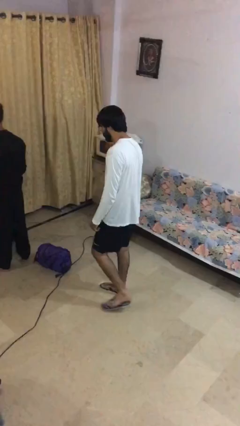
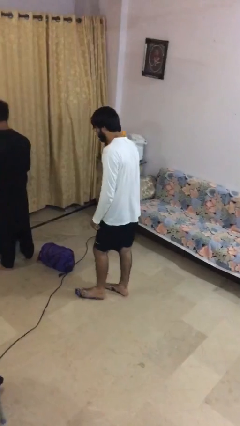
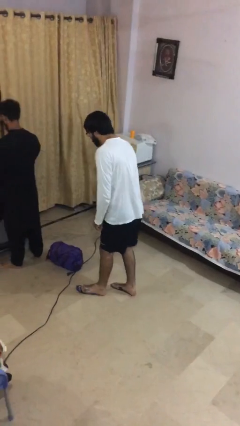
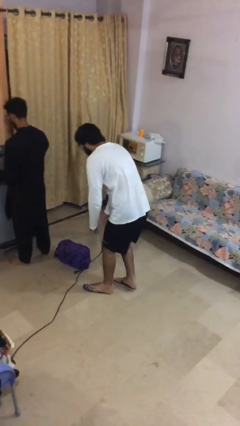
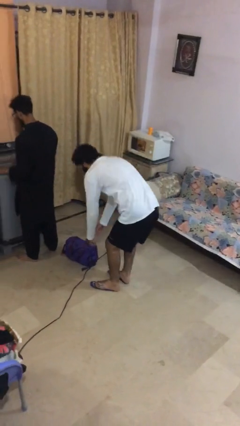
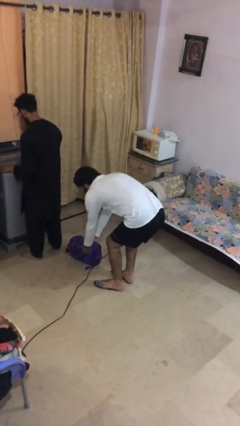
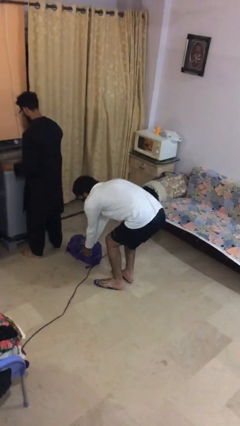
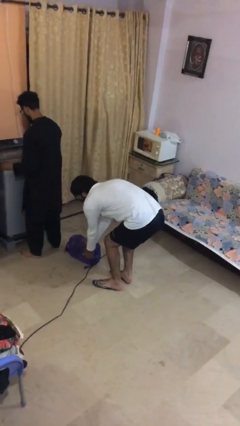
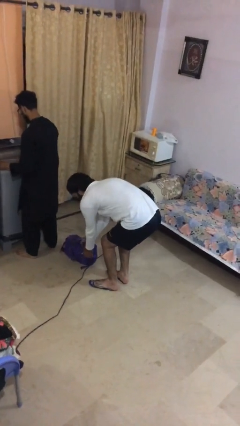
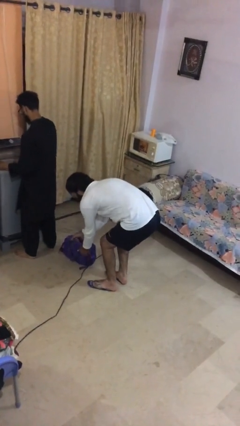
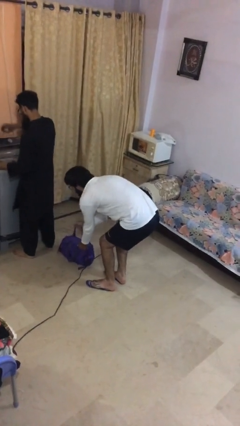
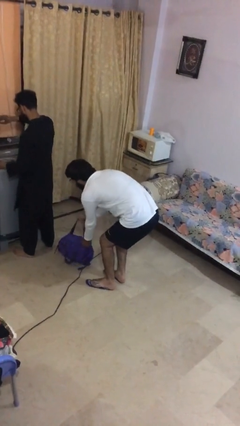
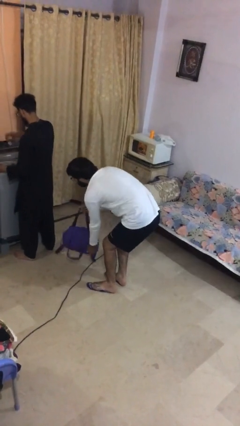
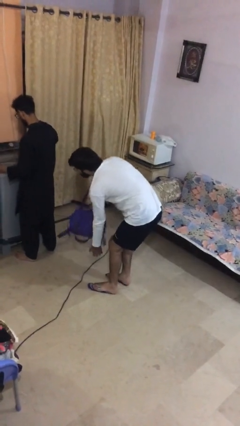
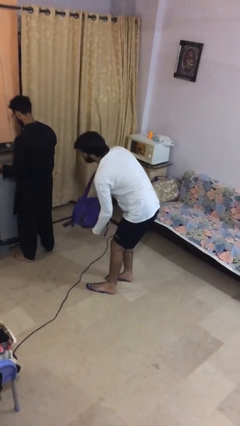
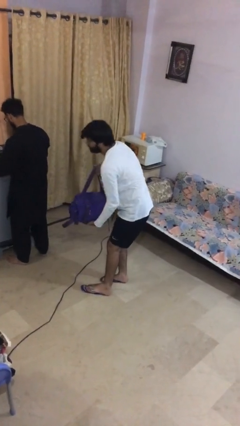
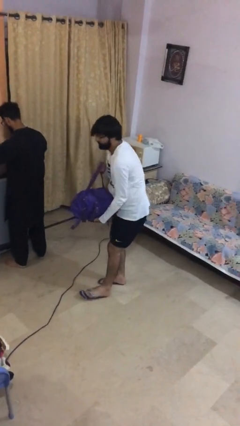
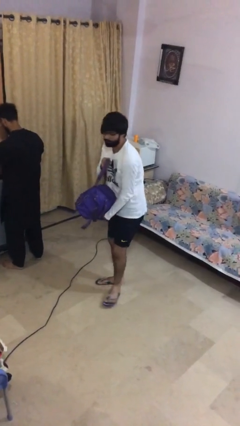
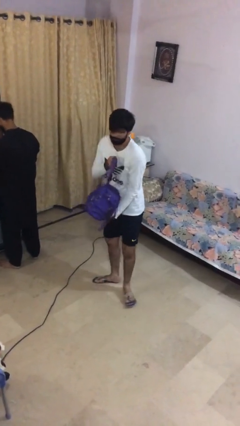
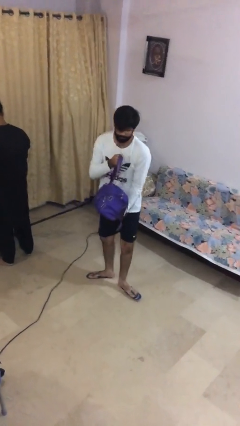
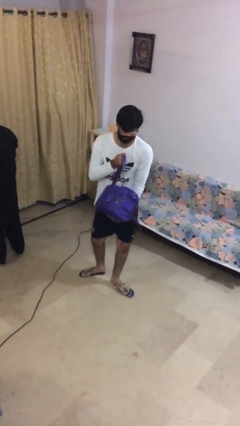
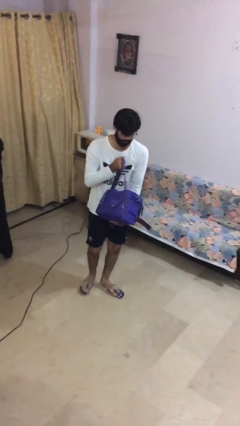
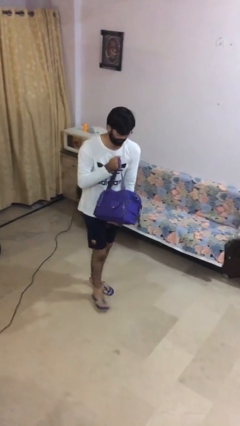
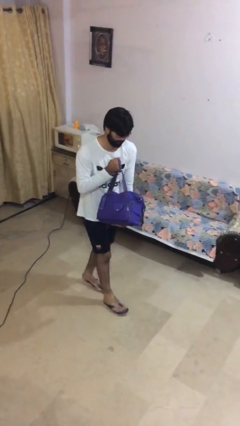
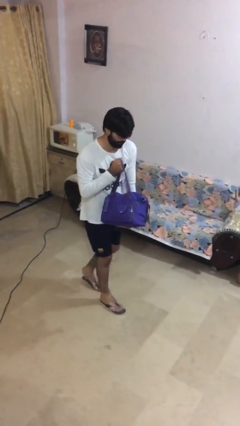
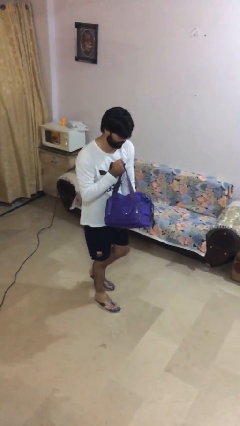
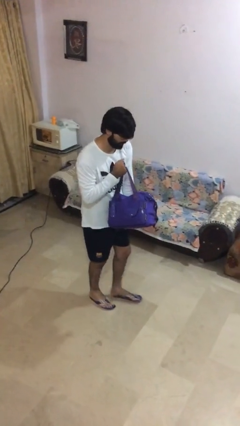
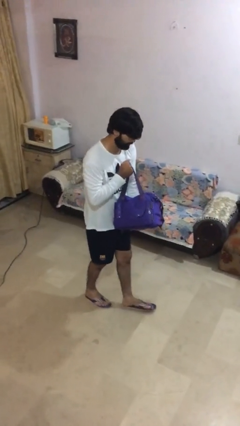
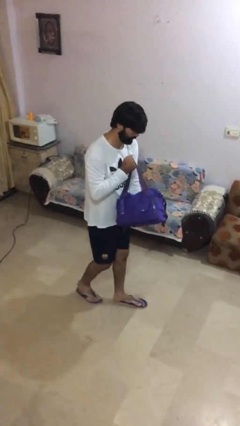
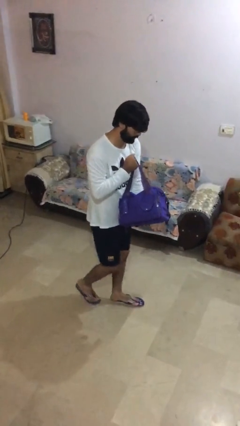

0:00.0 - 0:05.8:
person steals object from person

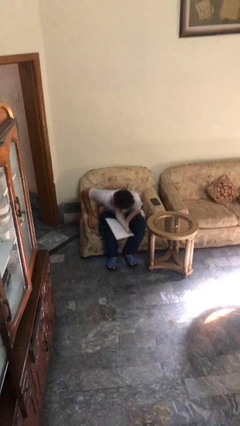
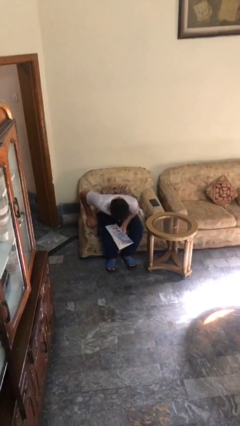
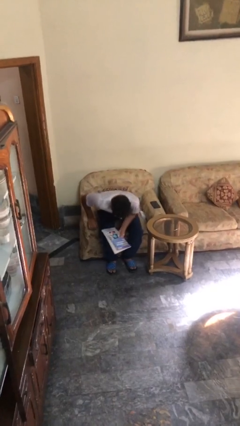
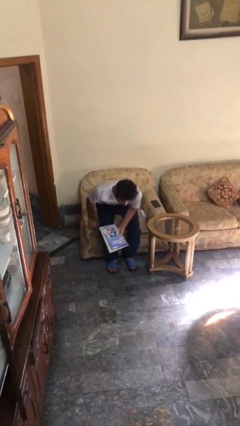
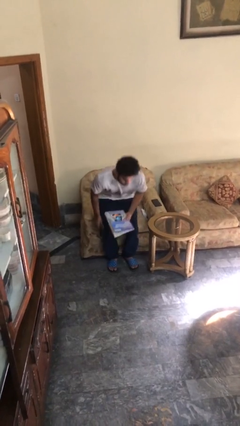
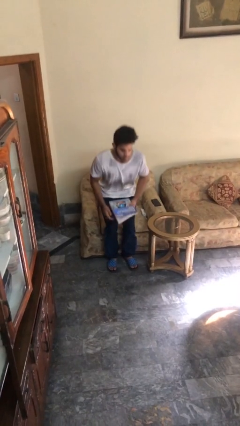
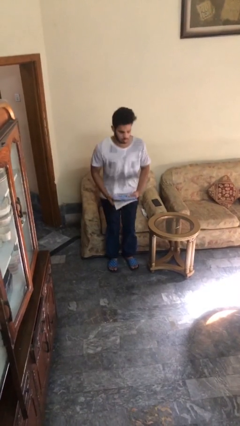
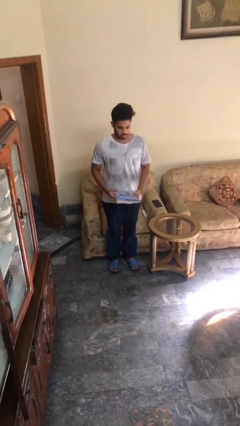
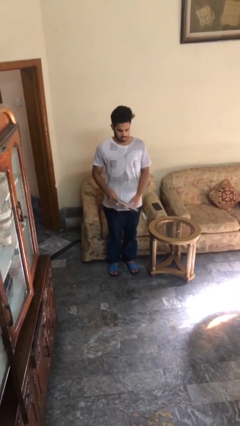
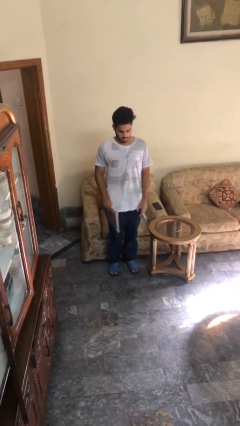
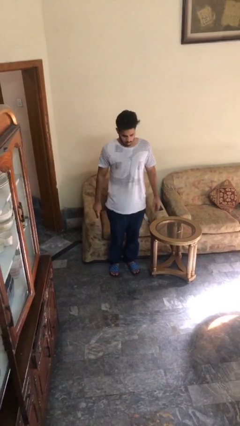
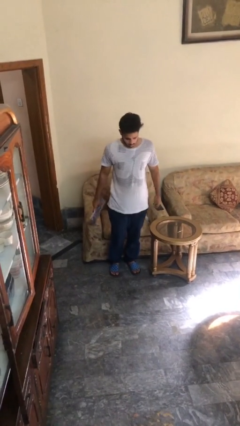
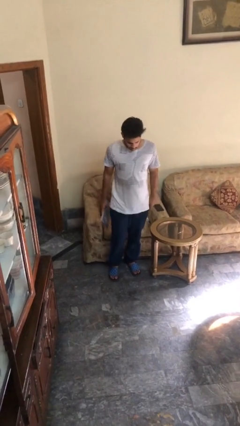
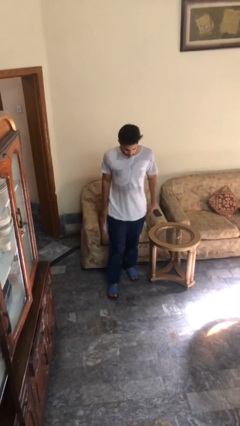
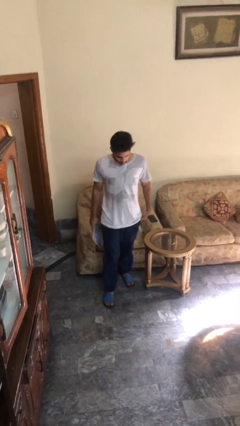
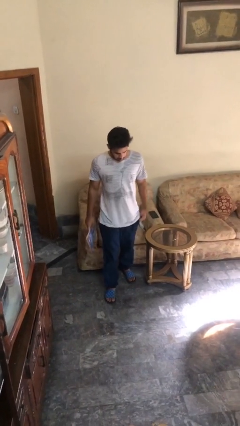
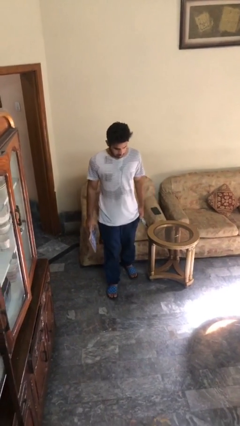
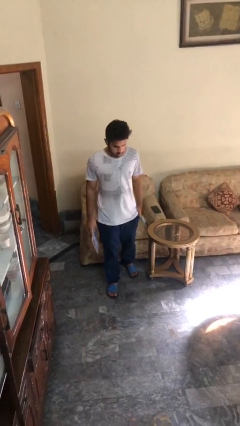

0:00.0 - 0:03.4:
person stands up

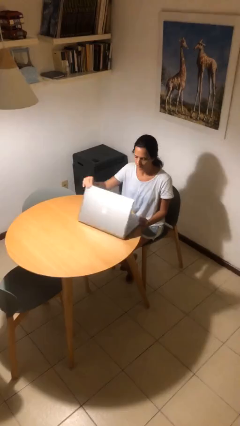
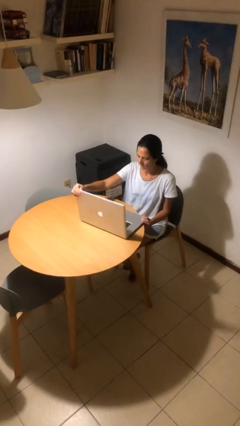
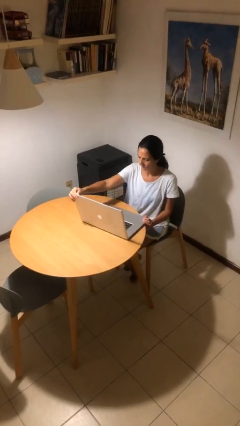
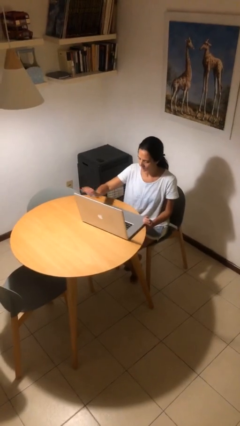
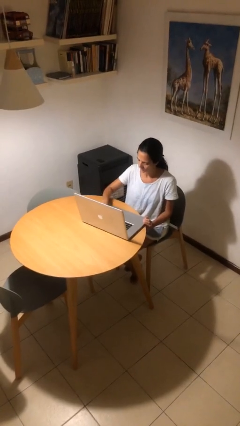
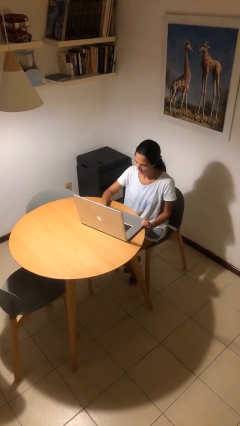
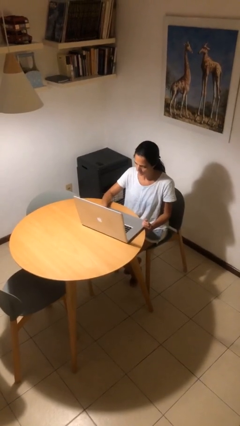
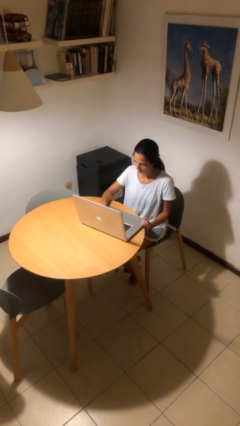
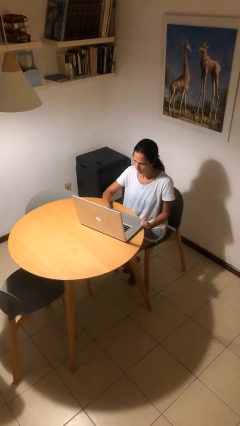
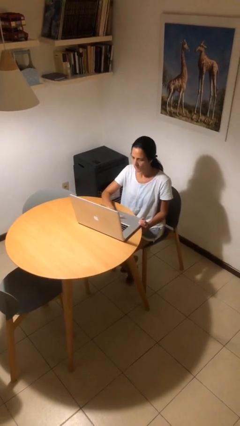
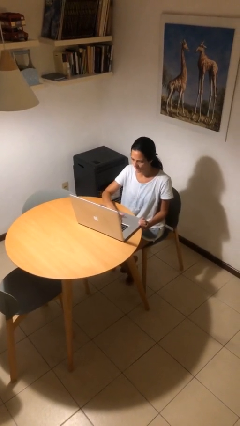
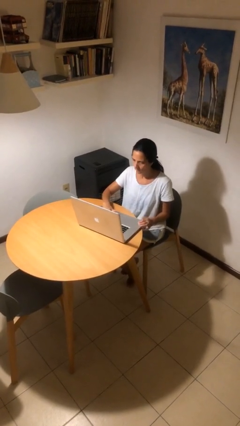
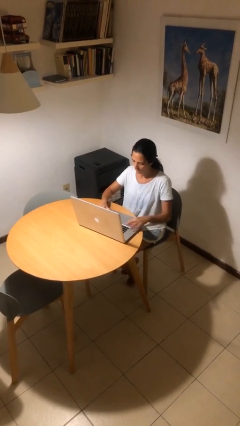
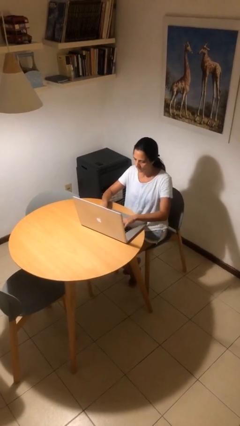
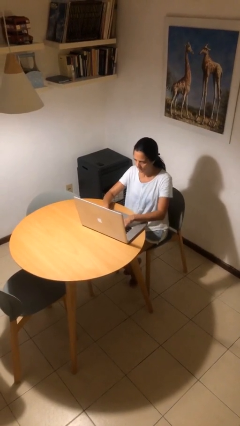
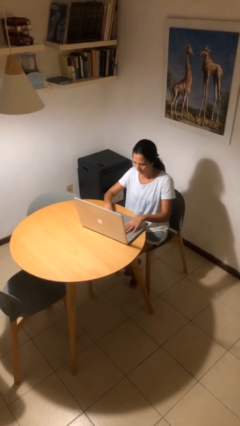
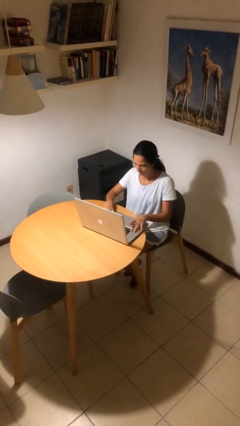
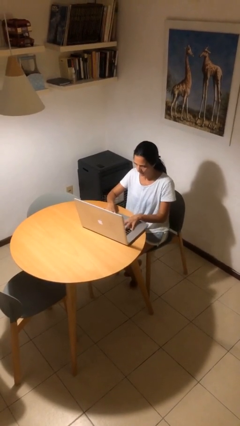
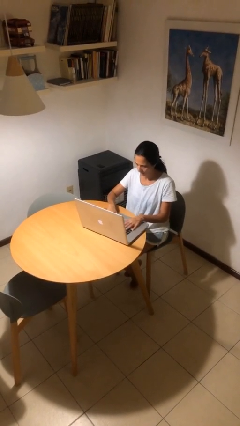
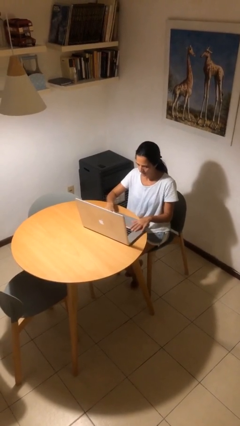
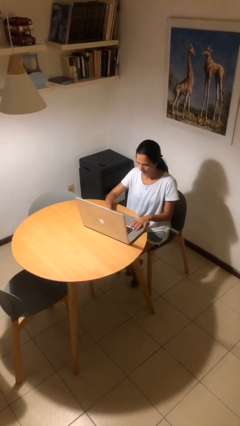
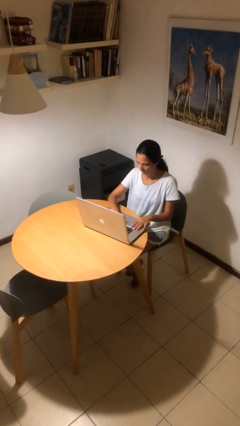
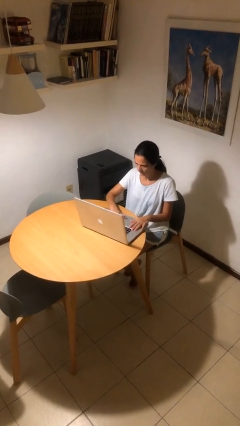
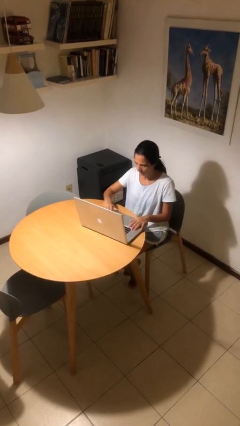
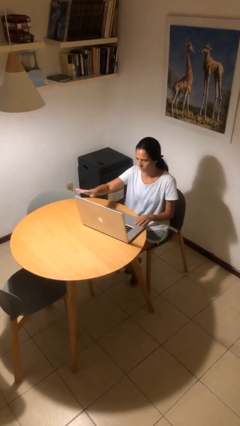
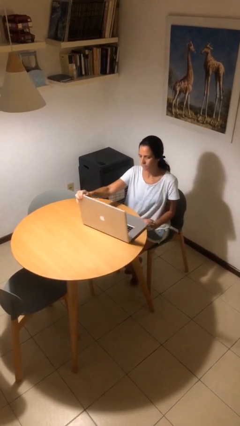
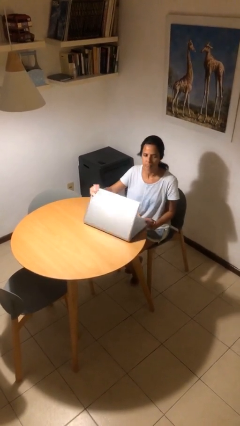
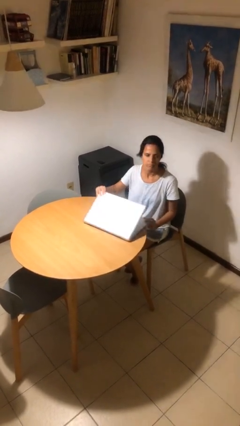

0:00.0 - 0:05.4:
person interacts with laptop

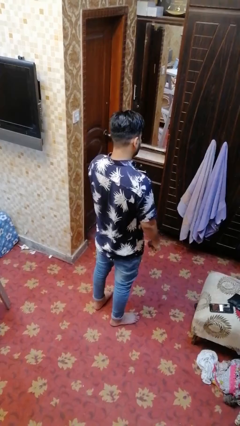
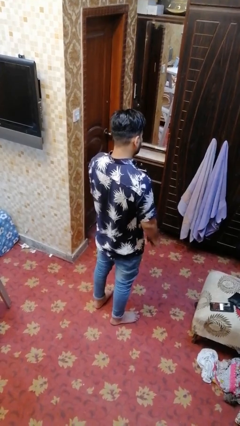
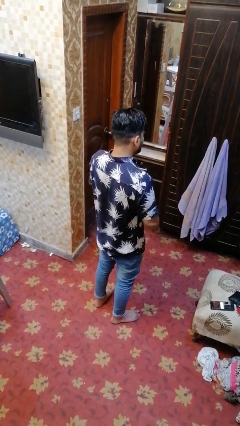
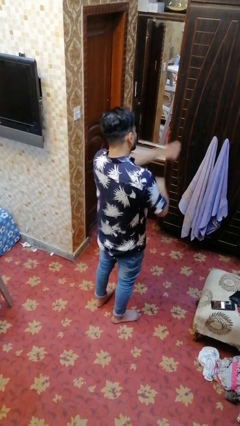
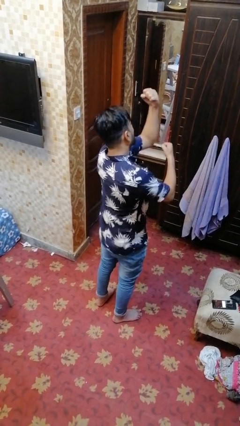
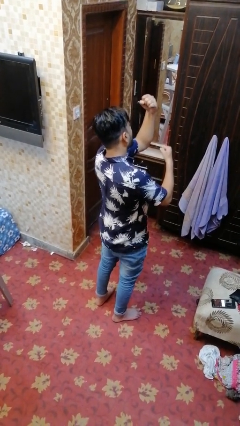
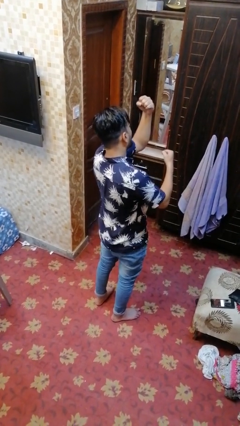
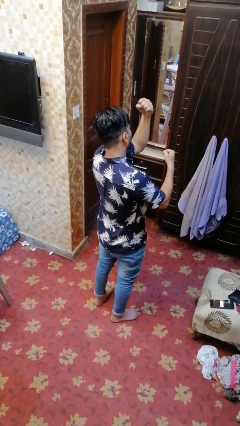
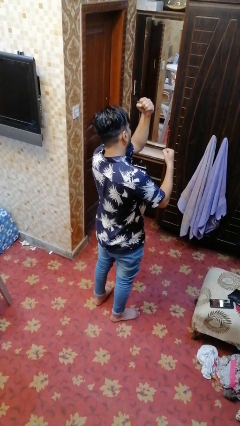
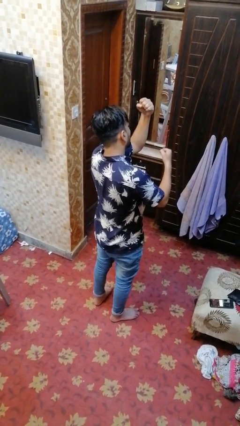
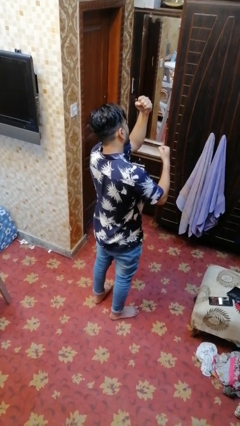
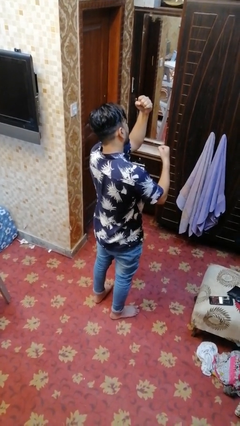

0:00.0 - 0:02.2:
person punches

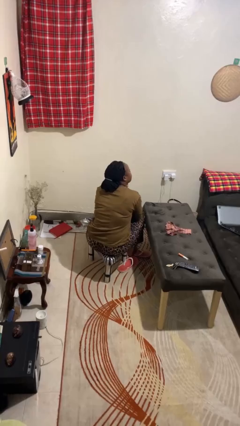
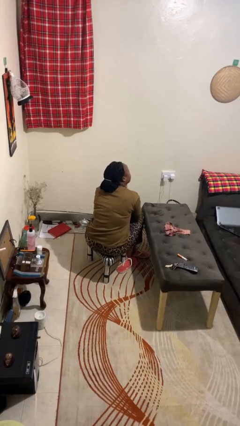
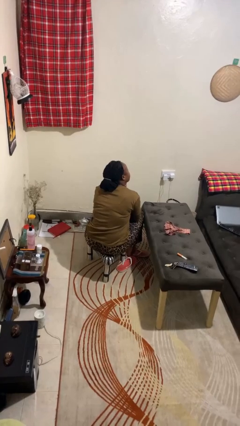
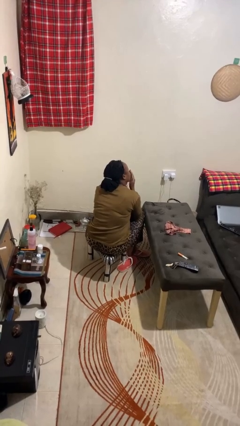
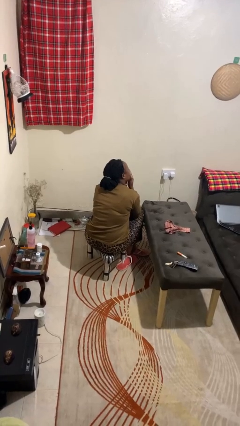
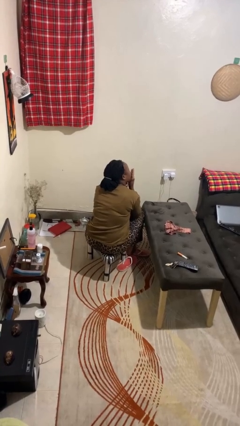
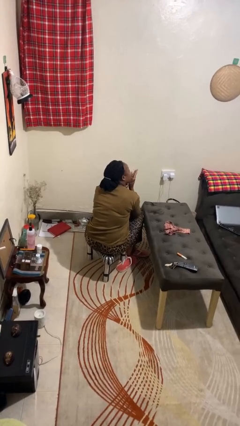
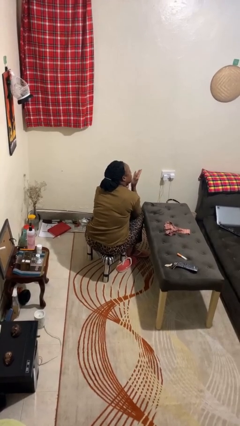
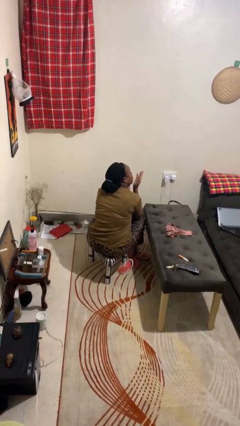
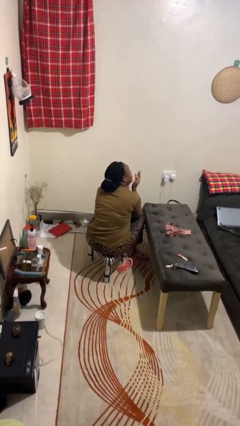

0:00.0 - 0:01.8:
person gestures blow kiss
